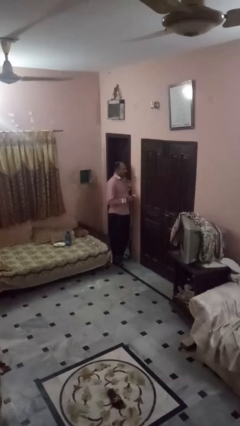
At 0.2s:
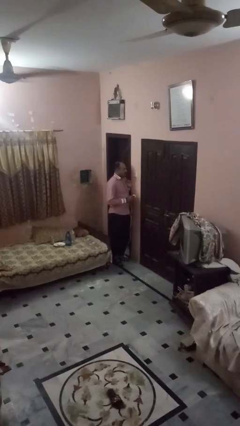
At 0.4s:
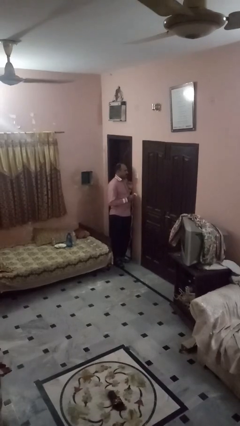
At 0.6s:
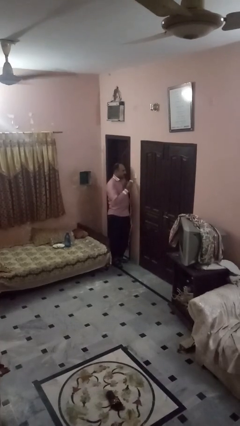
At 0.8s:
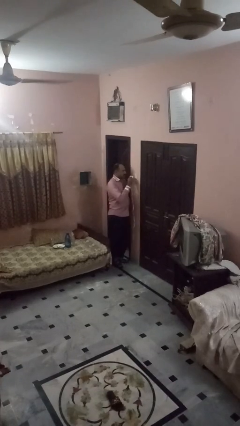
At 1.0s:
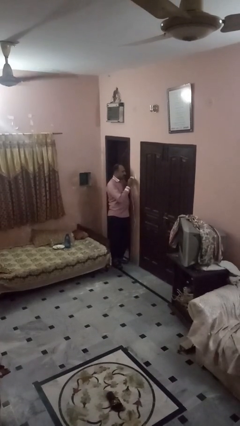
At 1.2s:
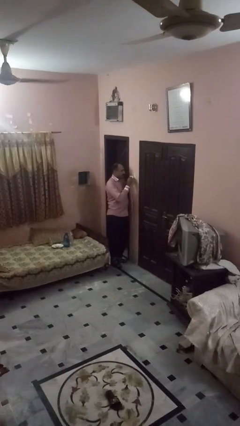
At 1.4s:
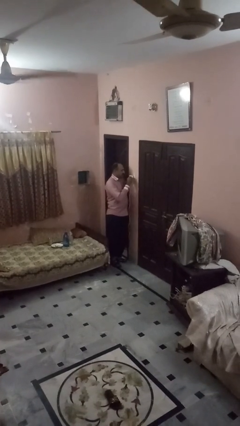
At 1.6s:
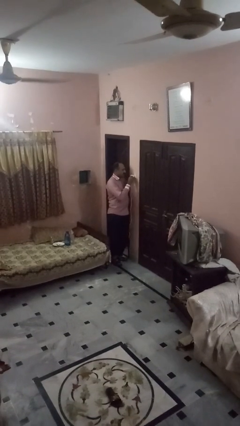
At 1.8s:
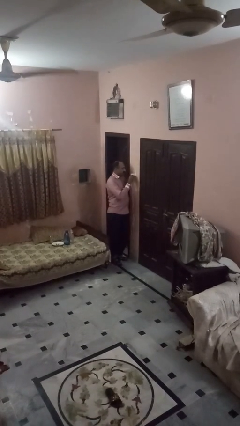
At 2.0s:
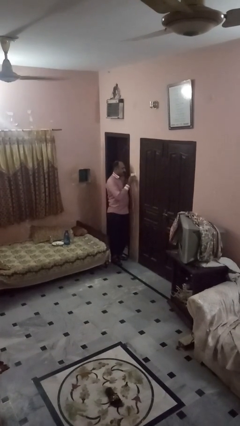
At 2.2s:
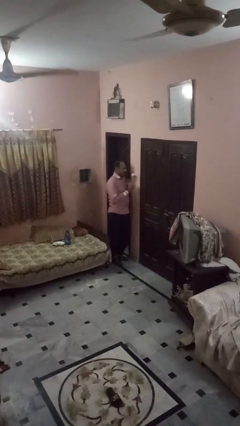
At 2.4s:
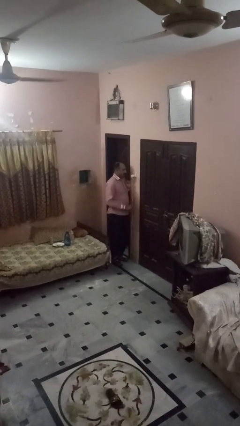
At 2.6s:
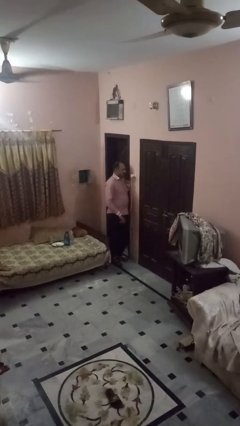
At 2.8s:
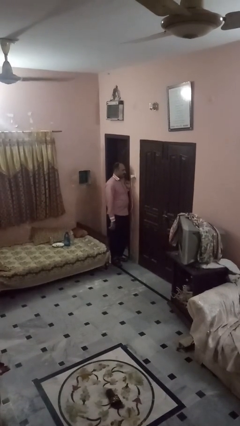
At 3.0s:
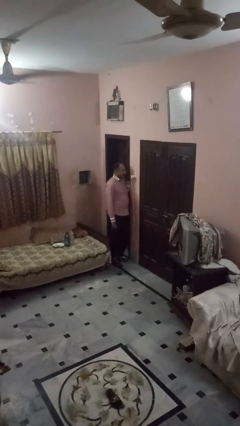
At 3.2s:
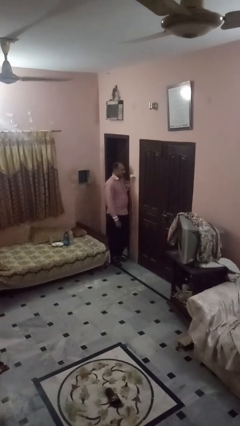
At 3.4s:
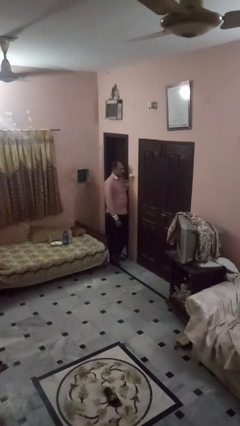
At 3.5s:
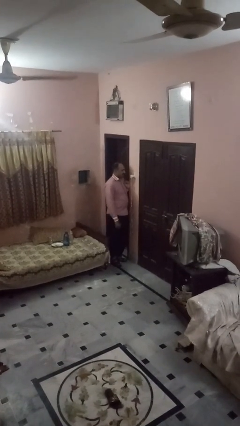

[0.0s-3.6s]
person plugs into electrical socket

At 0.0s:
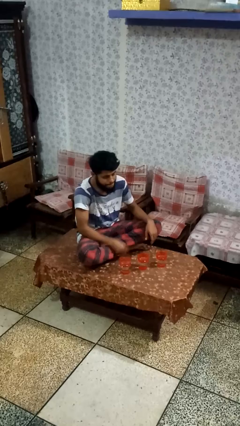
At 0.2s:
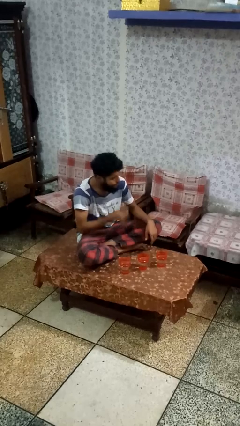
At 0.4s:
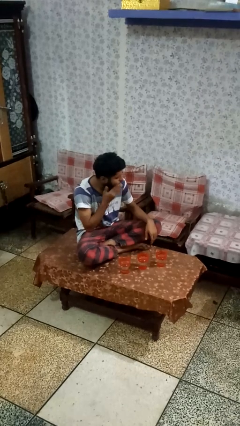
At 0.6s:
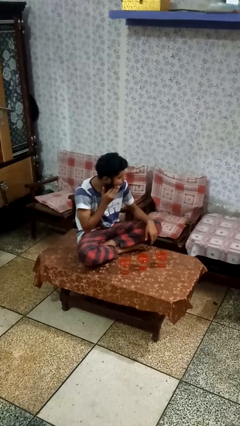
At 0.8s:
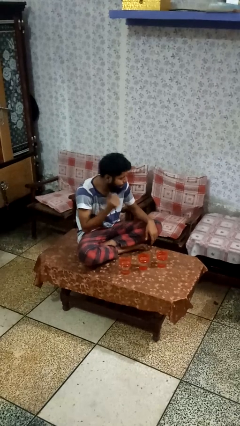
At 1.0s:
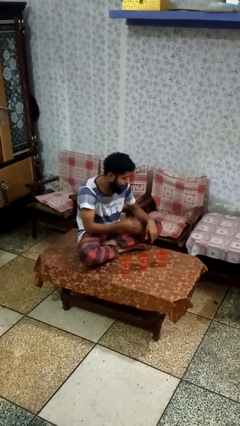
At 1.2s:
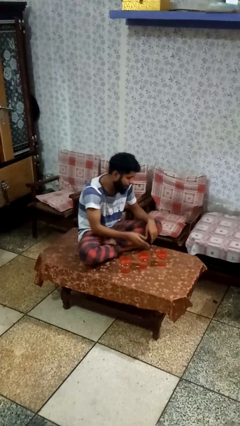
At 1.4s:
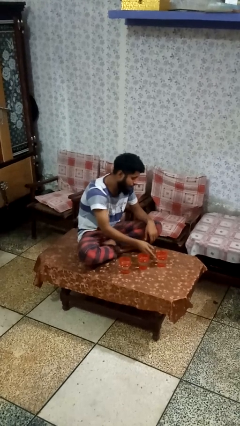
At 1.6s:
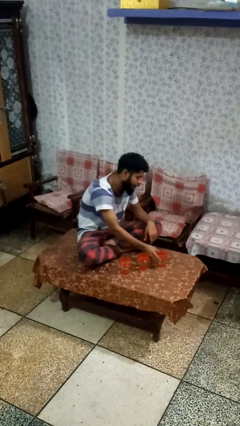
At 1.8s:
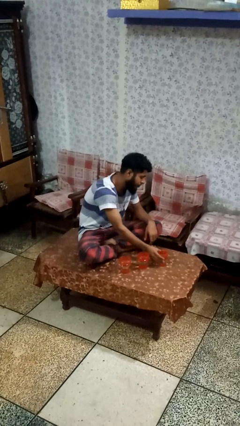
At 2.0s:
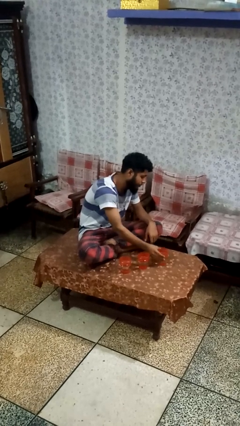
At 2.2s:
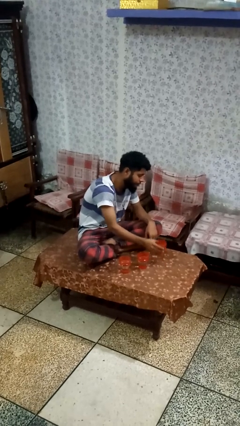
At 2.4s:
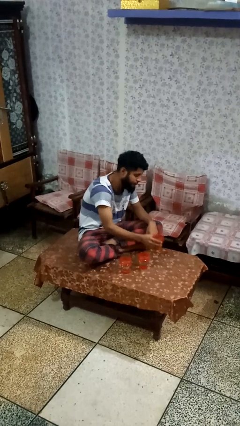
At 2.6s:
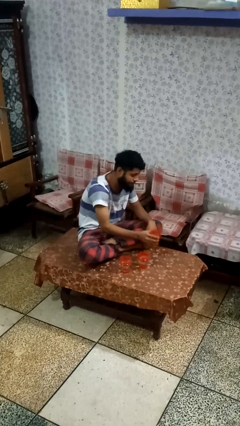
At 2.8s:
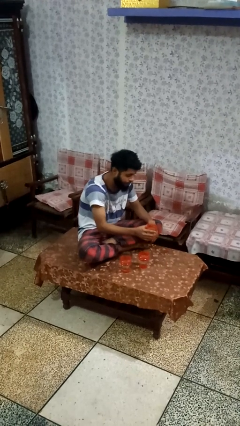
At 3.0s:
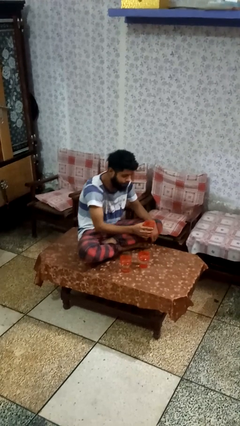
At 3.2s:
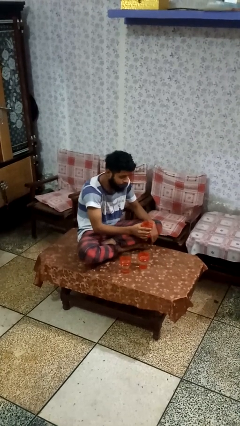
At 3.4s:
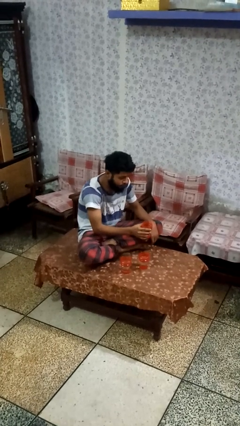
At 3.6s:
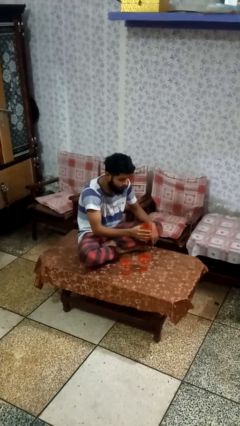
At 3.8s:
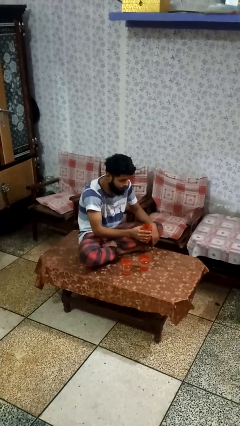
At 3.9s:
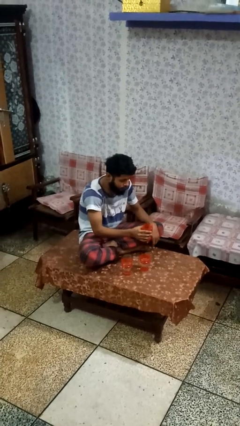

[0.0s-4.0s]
person picks up object from table

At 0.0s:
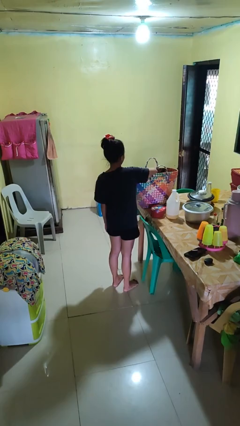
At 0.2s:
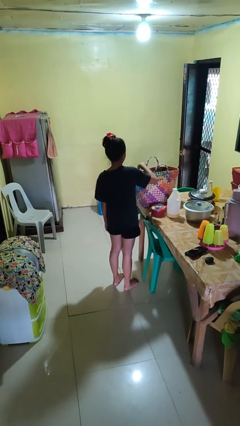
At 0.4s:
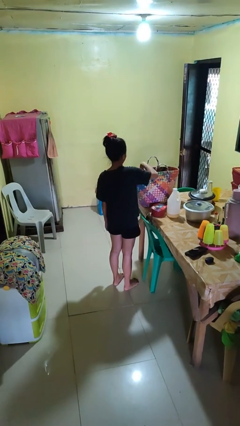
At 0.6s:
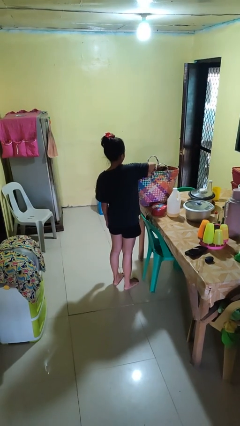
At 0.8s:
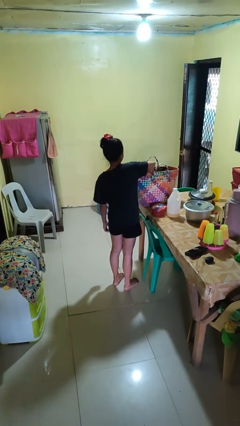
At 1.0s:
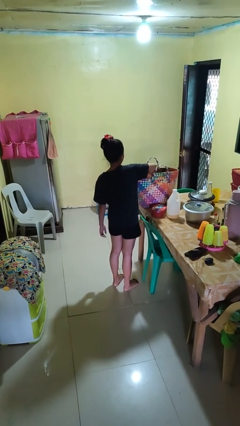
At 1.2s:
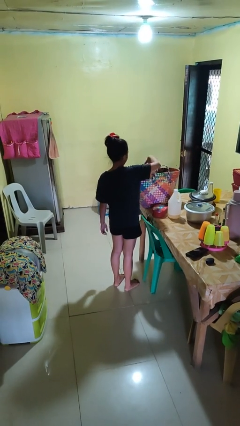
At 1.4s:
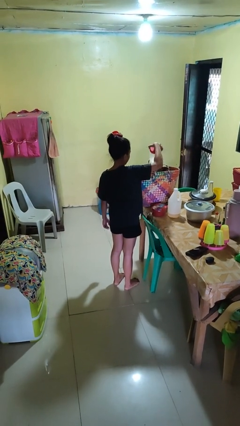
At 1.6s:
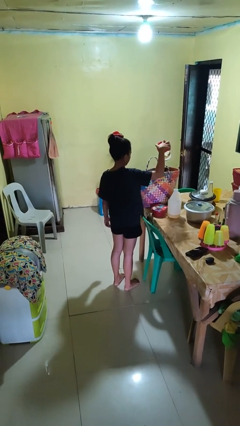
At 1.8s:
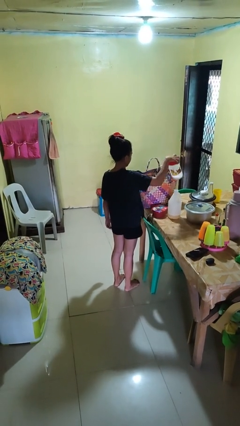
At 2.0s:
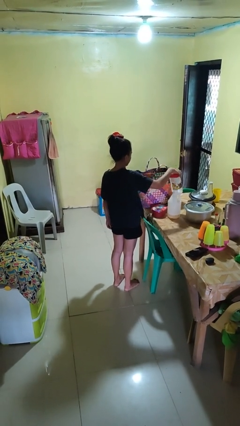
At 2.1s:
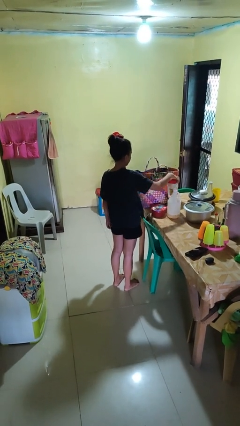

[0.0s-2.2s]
person takes object from basket

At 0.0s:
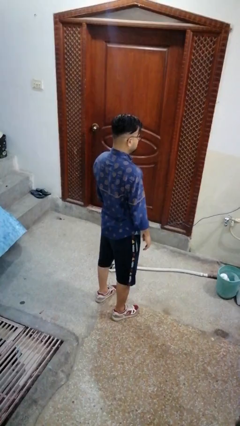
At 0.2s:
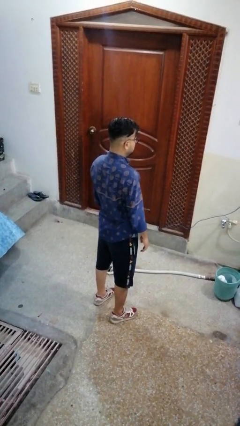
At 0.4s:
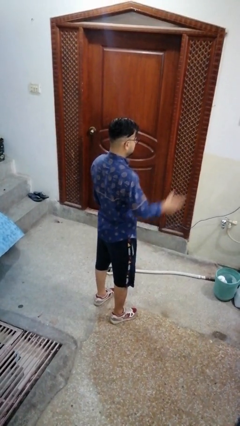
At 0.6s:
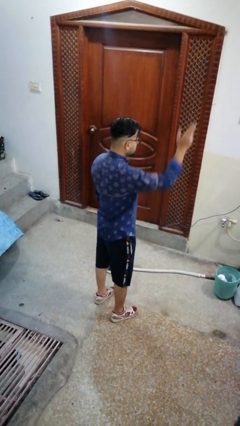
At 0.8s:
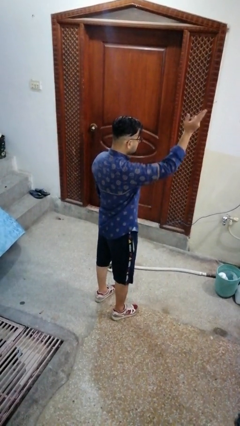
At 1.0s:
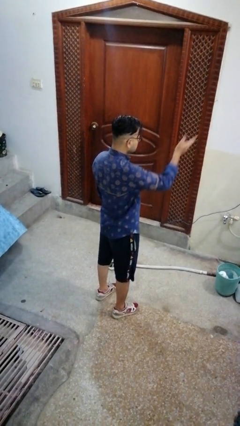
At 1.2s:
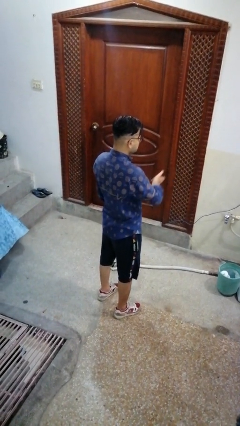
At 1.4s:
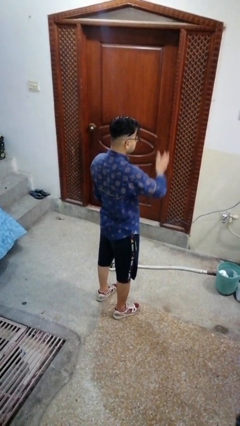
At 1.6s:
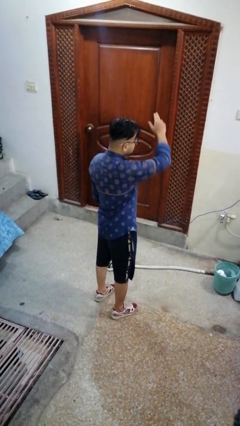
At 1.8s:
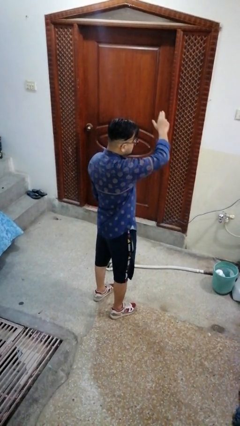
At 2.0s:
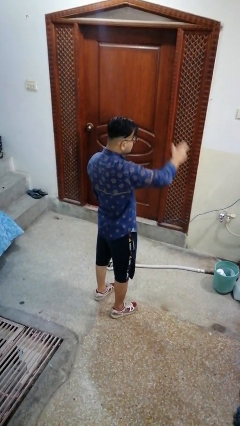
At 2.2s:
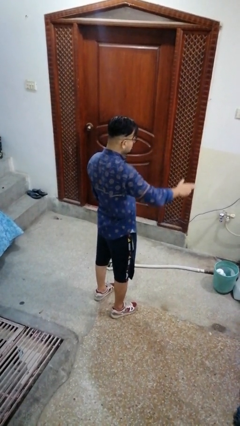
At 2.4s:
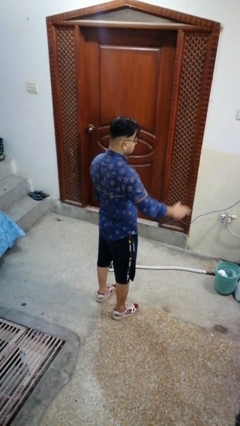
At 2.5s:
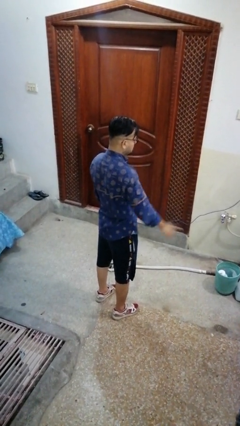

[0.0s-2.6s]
person gestures cut

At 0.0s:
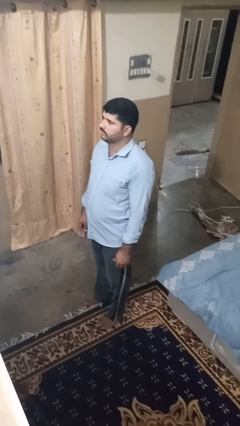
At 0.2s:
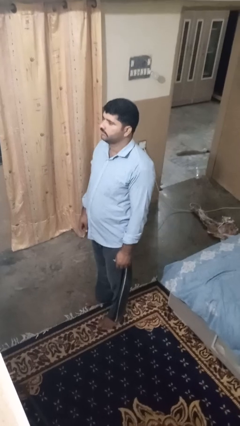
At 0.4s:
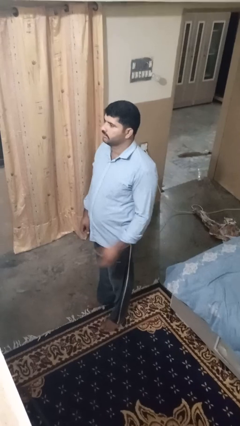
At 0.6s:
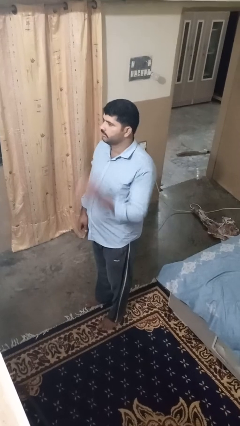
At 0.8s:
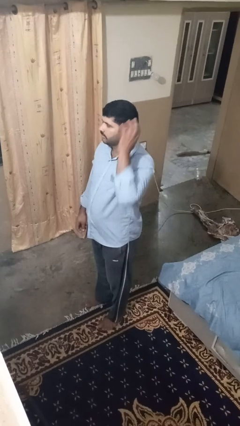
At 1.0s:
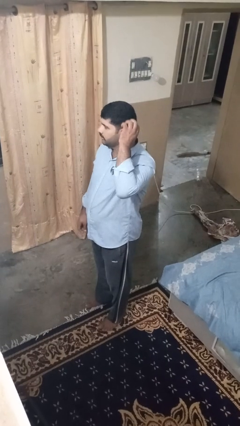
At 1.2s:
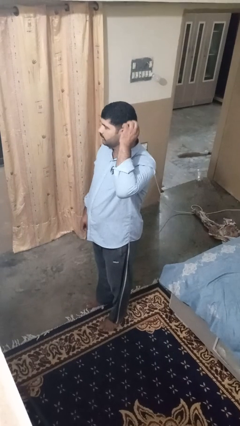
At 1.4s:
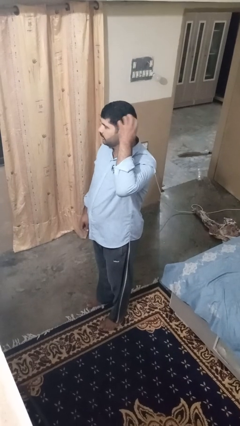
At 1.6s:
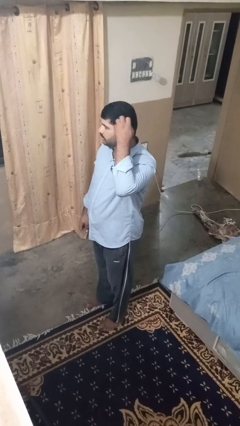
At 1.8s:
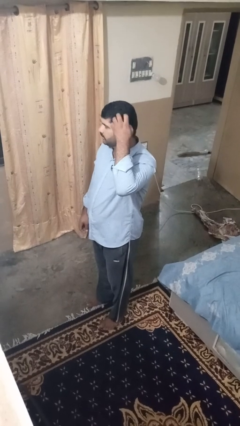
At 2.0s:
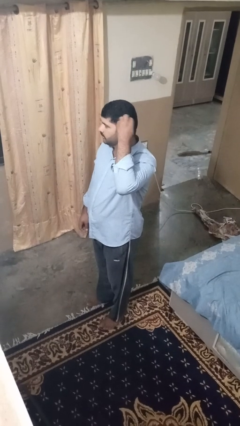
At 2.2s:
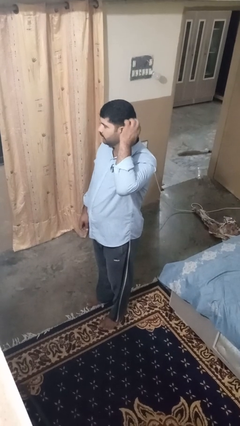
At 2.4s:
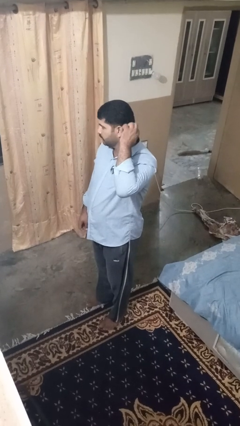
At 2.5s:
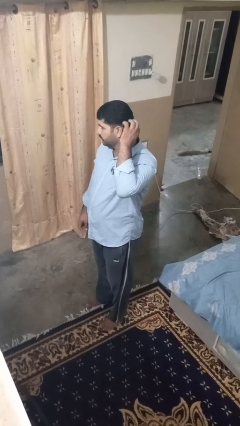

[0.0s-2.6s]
person strokes hair

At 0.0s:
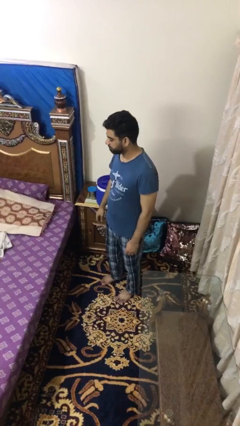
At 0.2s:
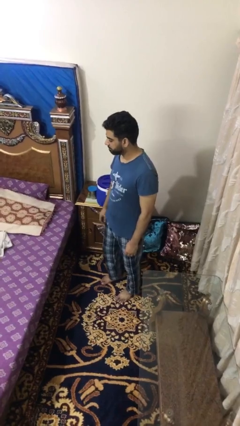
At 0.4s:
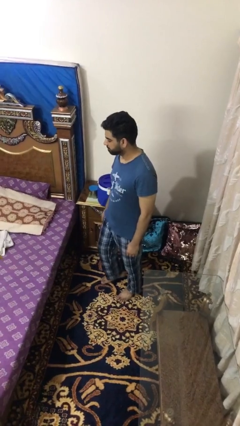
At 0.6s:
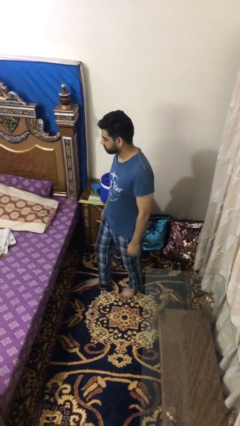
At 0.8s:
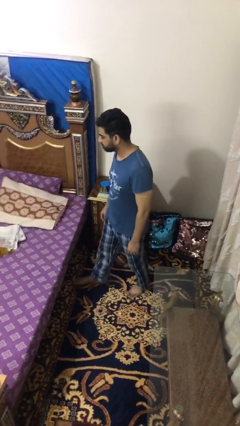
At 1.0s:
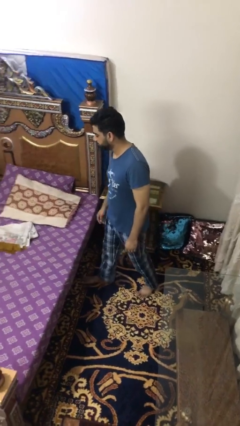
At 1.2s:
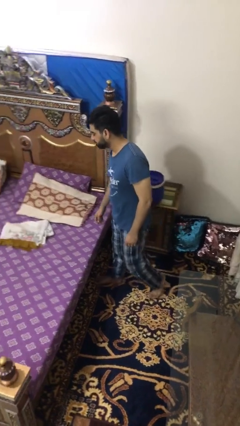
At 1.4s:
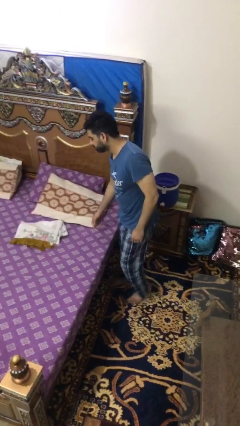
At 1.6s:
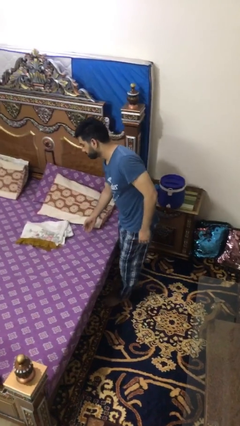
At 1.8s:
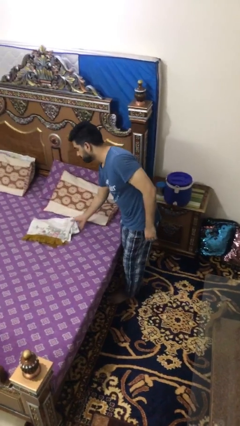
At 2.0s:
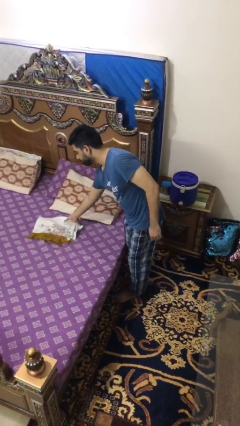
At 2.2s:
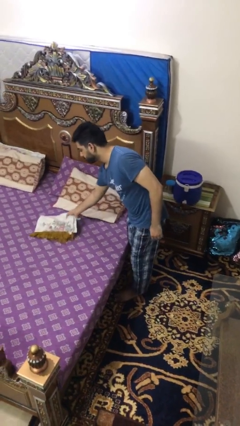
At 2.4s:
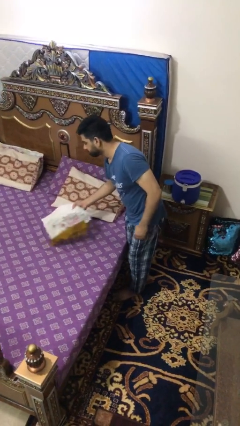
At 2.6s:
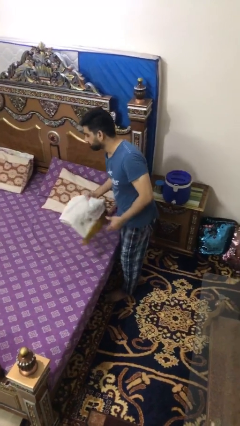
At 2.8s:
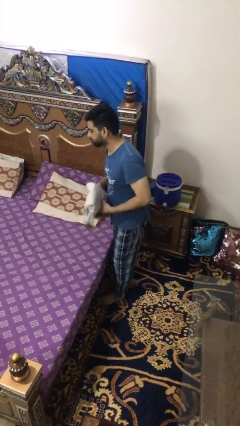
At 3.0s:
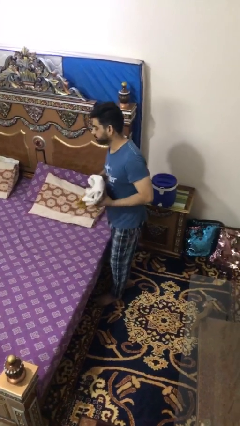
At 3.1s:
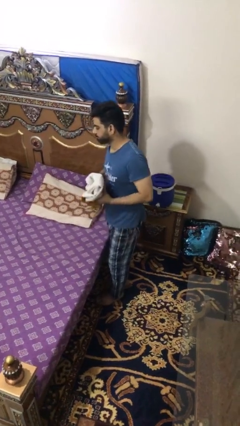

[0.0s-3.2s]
person picks up object from bed
